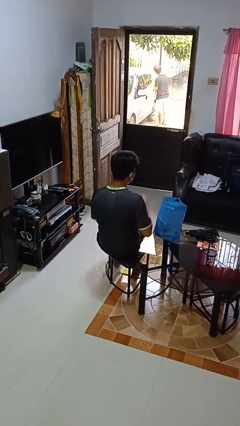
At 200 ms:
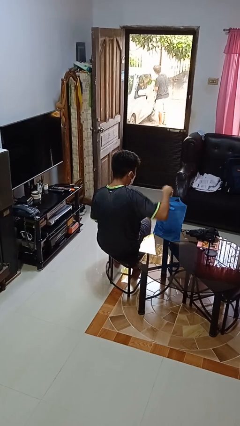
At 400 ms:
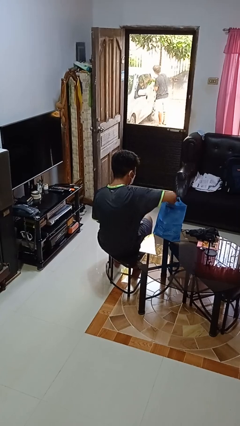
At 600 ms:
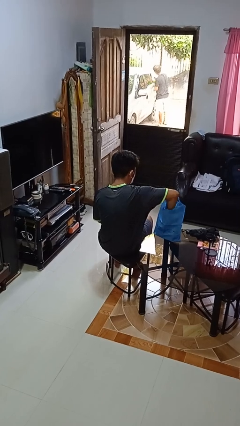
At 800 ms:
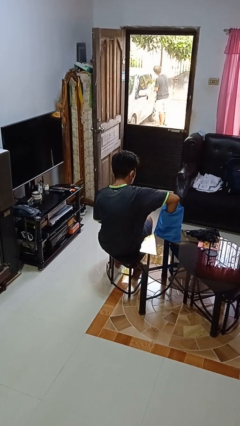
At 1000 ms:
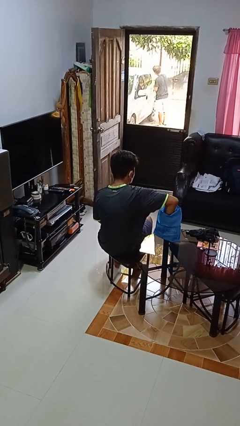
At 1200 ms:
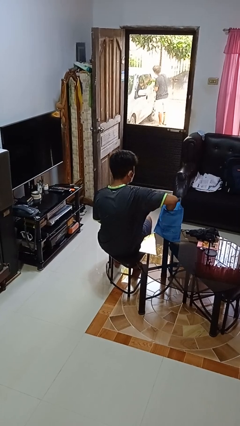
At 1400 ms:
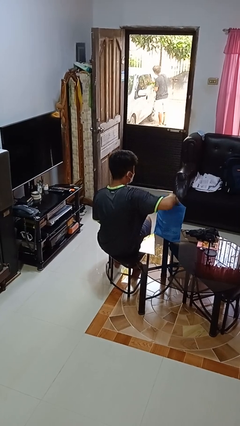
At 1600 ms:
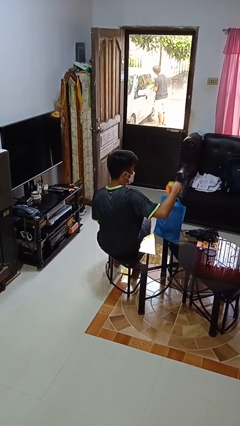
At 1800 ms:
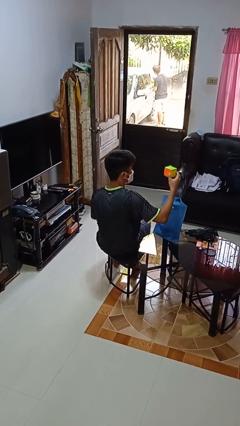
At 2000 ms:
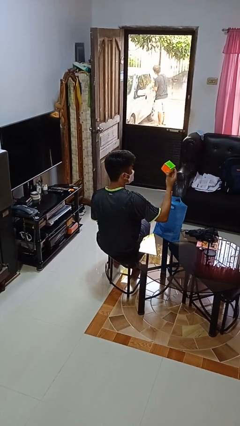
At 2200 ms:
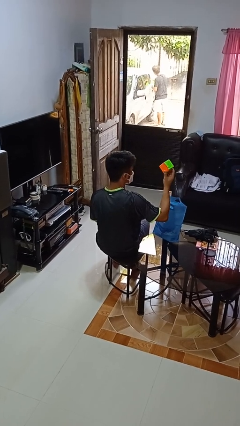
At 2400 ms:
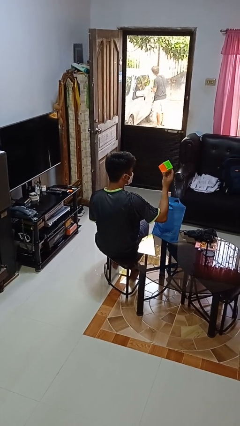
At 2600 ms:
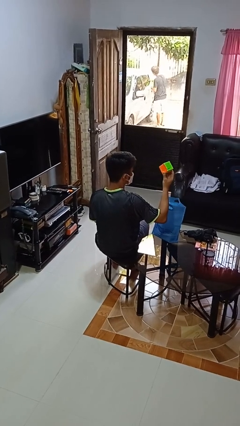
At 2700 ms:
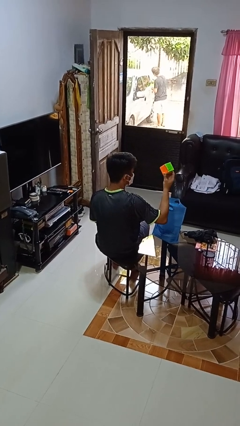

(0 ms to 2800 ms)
person takes object from bag

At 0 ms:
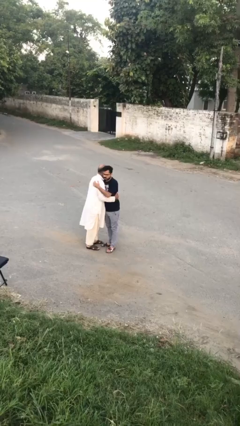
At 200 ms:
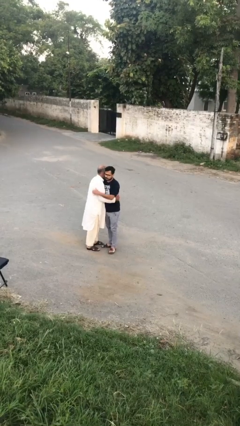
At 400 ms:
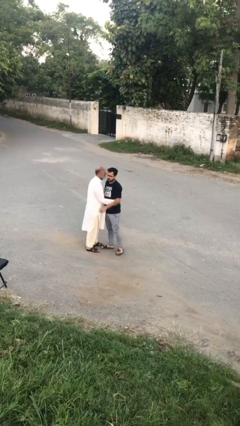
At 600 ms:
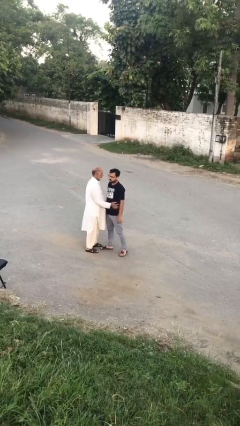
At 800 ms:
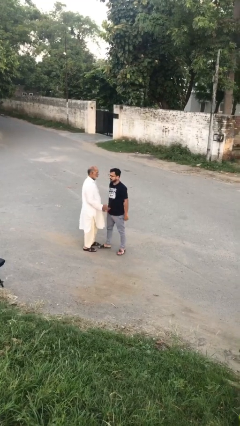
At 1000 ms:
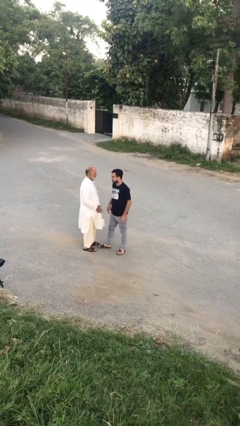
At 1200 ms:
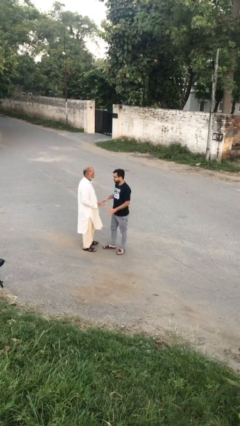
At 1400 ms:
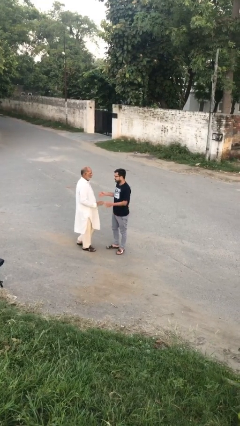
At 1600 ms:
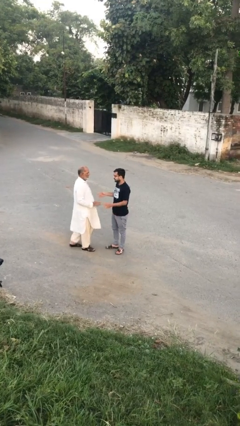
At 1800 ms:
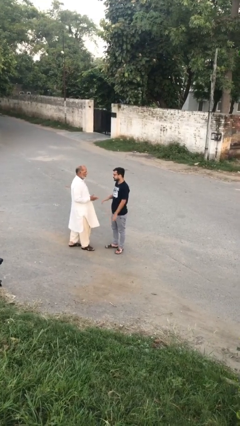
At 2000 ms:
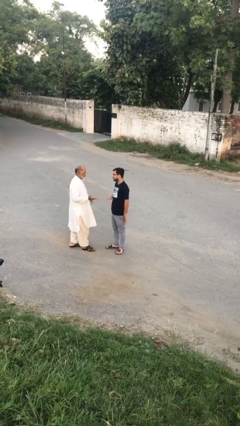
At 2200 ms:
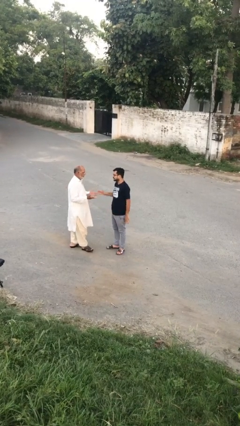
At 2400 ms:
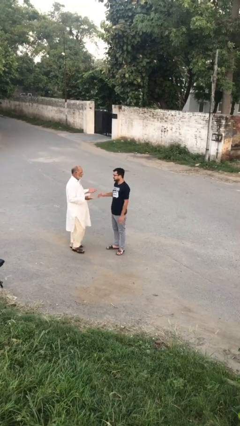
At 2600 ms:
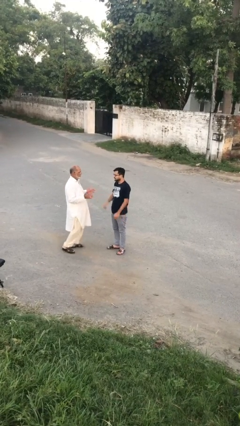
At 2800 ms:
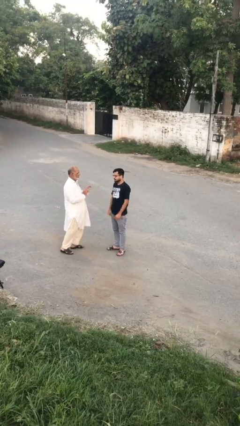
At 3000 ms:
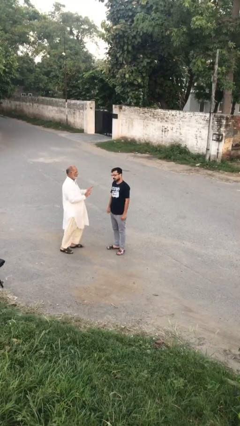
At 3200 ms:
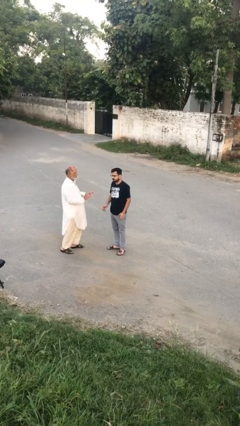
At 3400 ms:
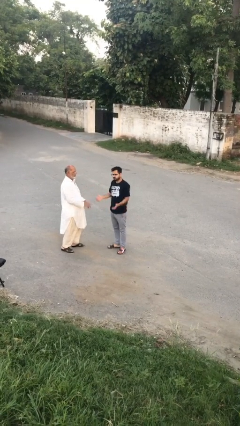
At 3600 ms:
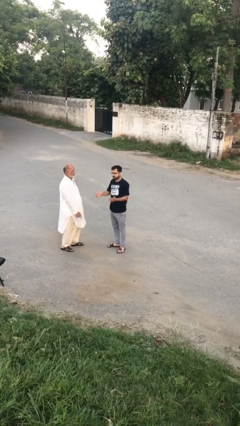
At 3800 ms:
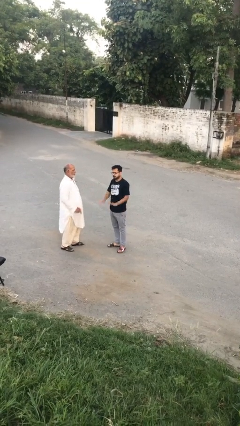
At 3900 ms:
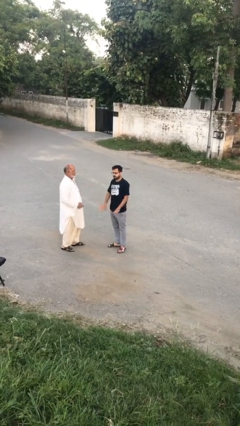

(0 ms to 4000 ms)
person talks to person

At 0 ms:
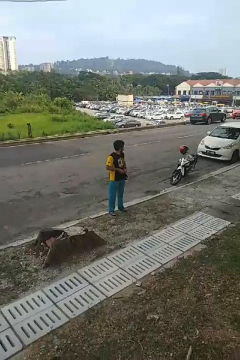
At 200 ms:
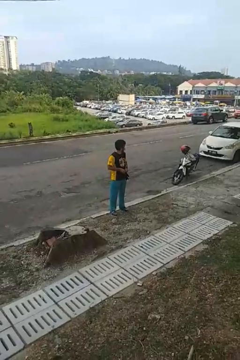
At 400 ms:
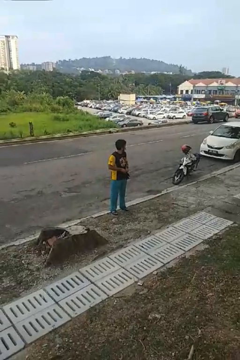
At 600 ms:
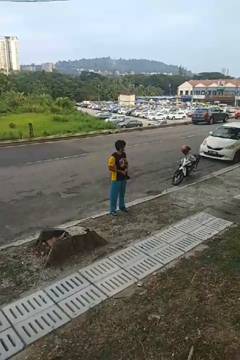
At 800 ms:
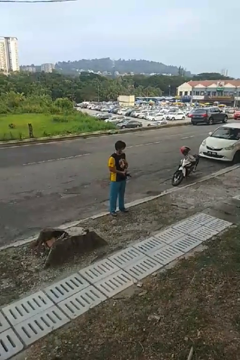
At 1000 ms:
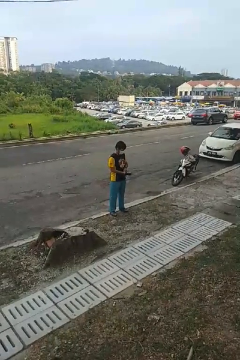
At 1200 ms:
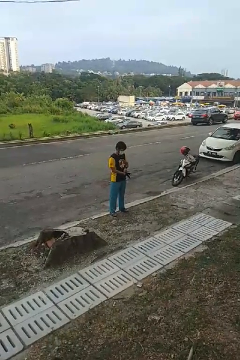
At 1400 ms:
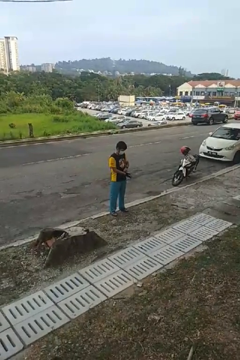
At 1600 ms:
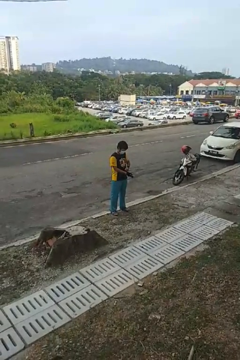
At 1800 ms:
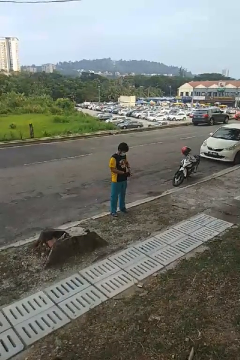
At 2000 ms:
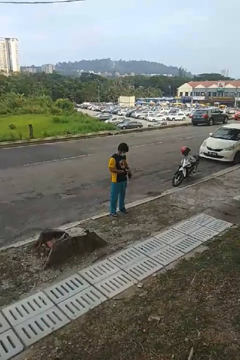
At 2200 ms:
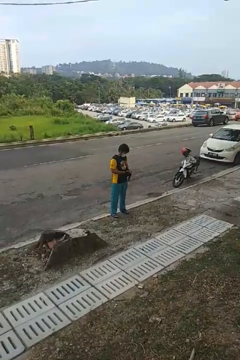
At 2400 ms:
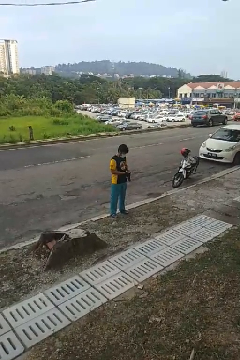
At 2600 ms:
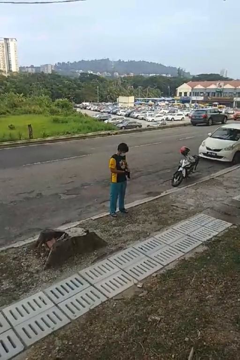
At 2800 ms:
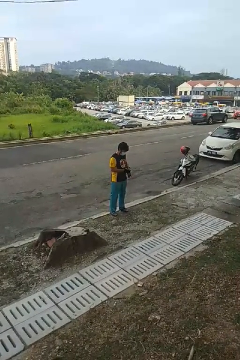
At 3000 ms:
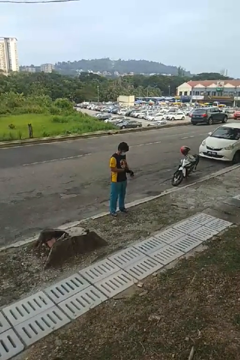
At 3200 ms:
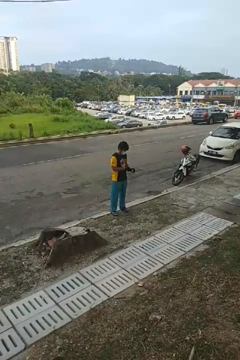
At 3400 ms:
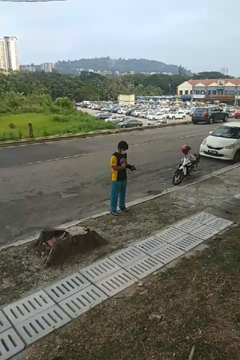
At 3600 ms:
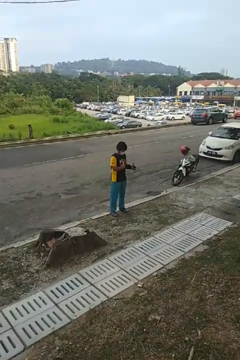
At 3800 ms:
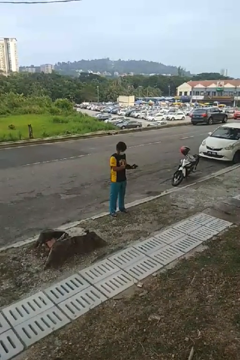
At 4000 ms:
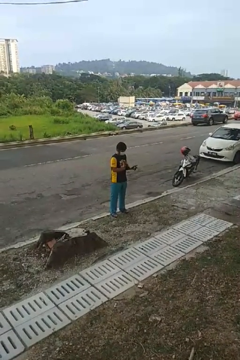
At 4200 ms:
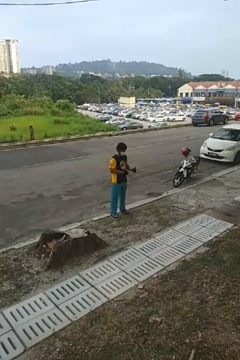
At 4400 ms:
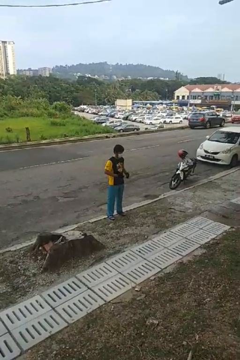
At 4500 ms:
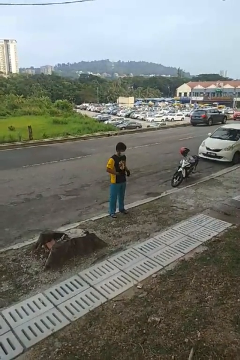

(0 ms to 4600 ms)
person puts on gloves

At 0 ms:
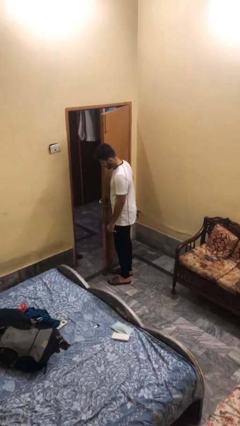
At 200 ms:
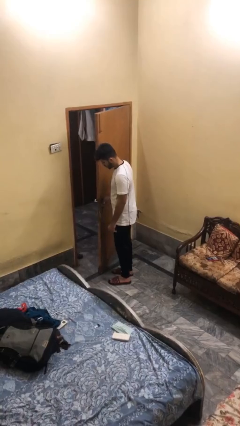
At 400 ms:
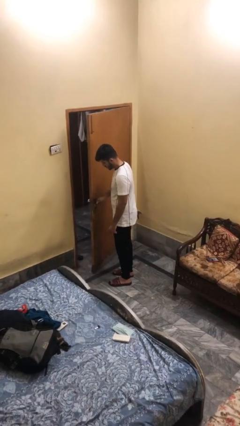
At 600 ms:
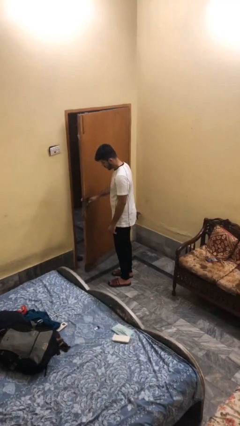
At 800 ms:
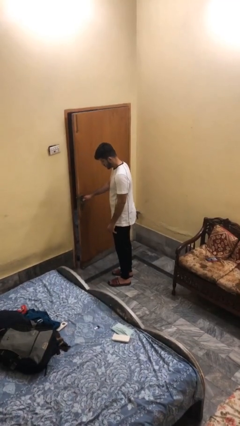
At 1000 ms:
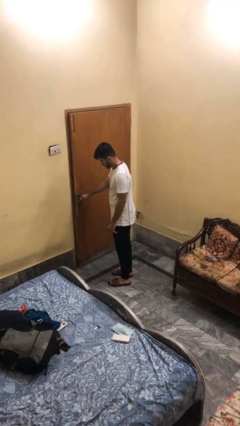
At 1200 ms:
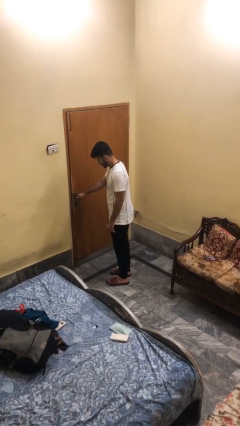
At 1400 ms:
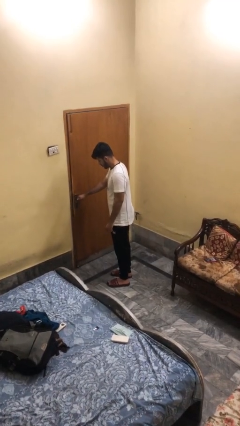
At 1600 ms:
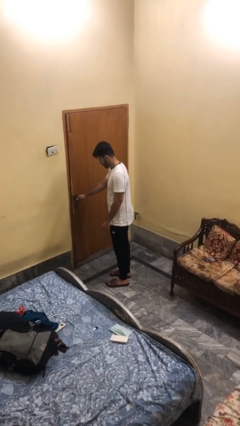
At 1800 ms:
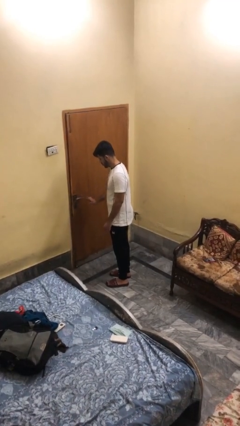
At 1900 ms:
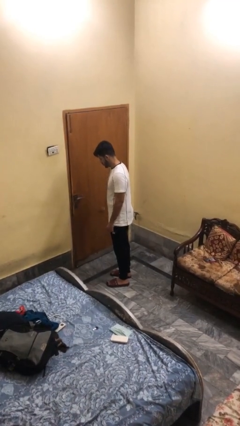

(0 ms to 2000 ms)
person closes facility door

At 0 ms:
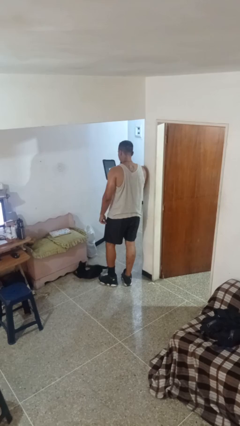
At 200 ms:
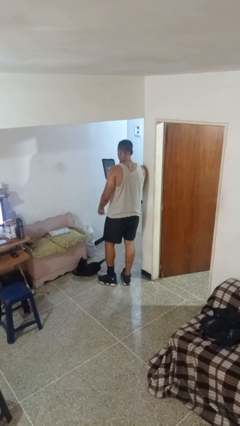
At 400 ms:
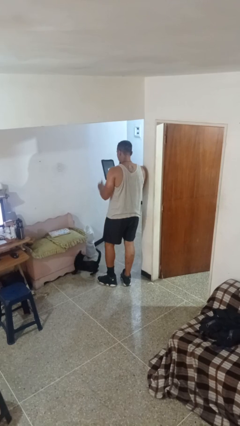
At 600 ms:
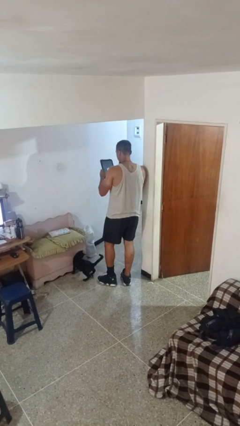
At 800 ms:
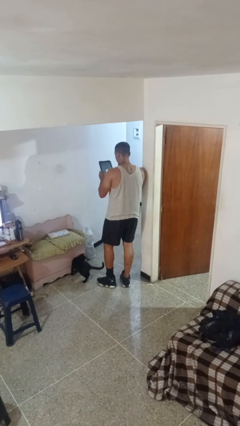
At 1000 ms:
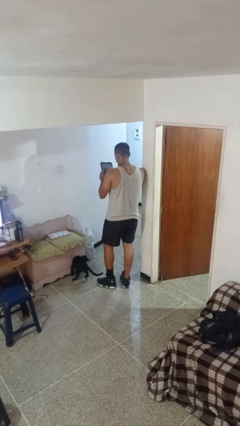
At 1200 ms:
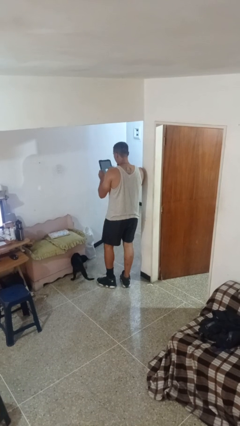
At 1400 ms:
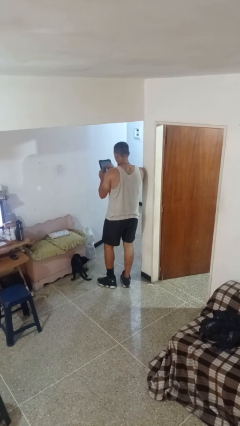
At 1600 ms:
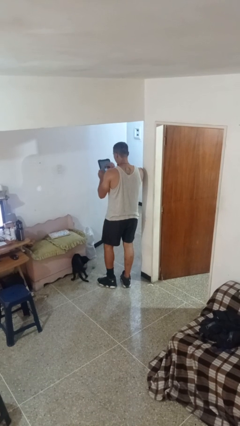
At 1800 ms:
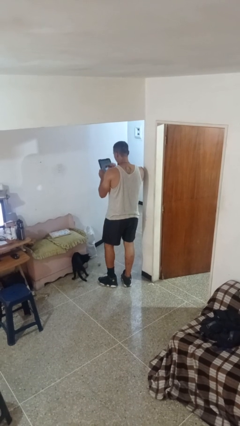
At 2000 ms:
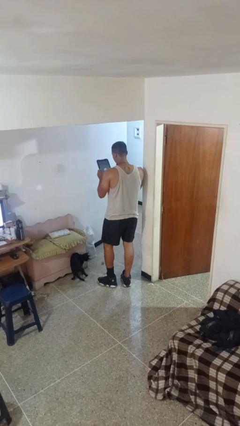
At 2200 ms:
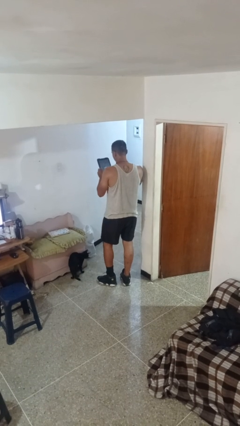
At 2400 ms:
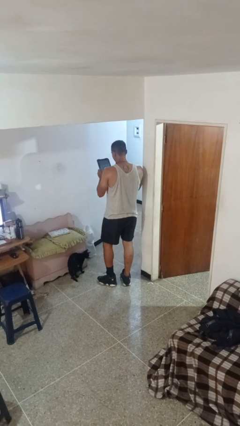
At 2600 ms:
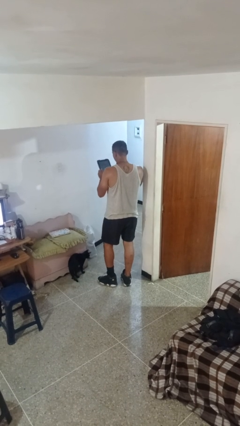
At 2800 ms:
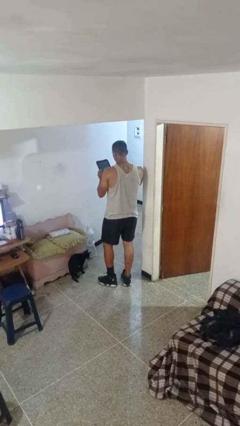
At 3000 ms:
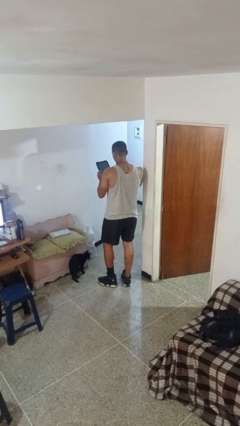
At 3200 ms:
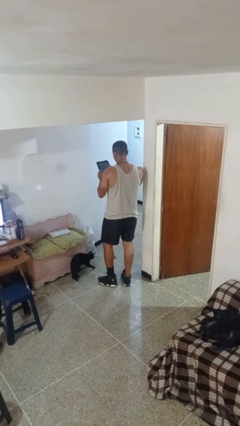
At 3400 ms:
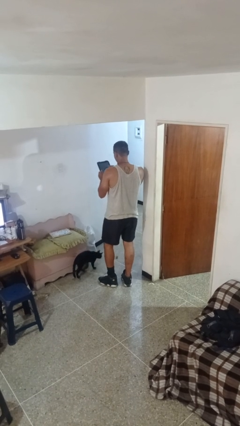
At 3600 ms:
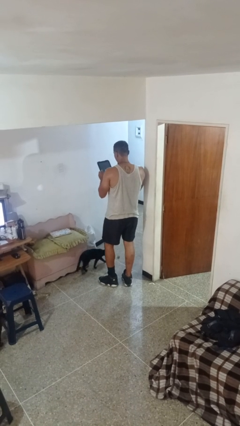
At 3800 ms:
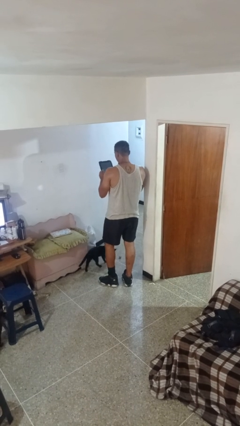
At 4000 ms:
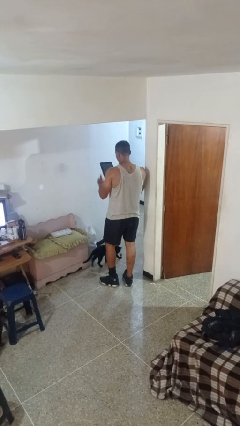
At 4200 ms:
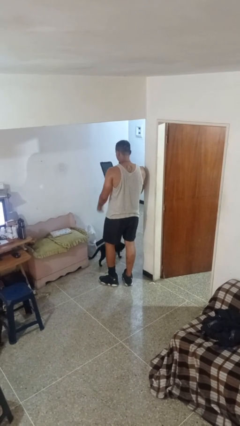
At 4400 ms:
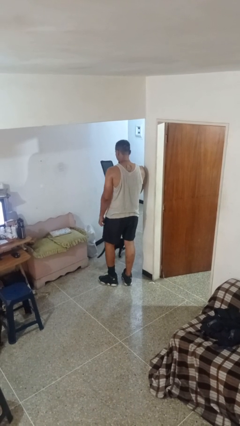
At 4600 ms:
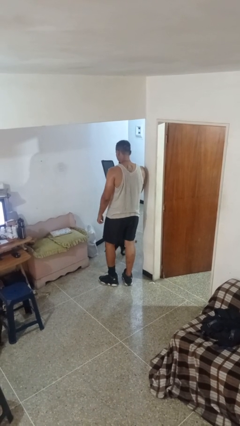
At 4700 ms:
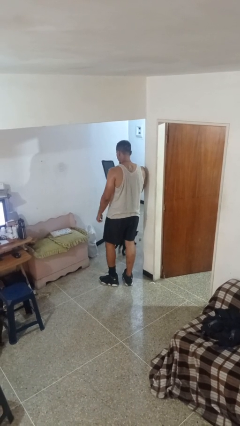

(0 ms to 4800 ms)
person interacts with tablet

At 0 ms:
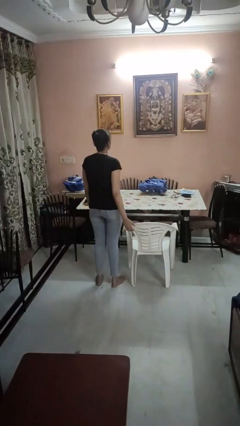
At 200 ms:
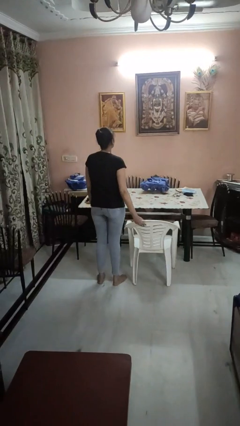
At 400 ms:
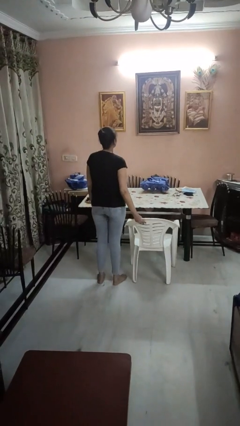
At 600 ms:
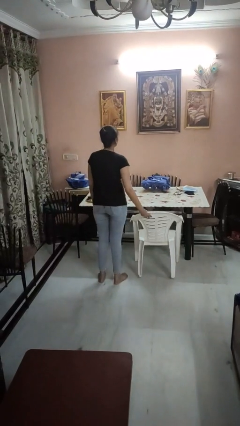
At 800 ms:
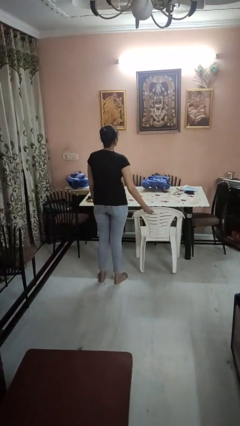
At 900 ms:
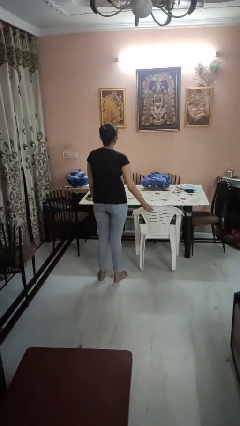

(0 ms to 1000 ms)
person pushes in chair
